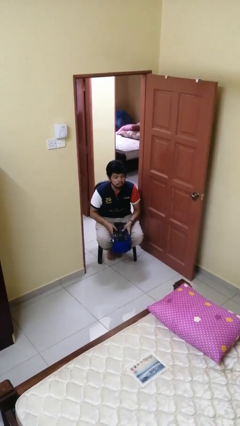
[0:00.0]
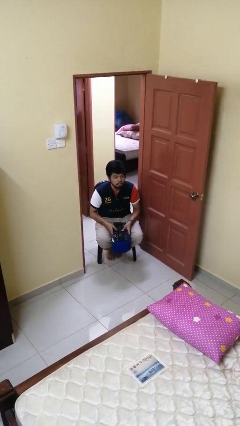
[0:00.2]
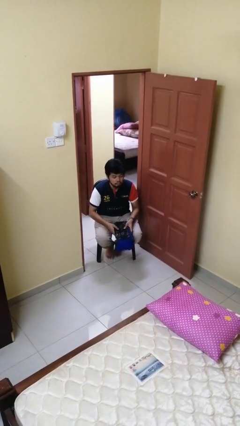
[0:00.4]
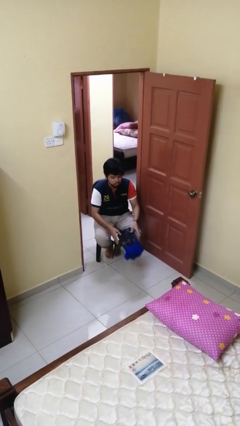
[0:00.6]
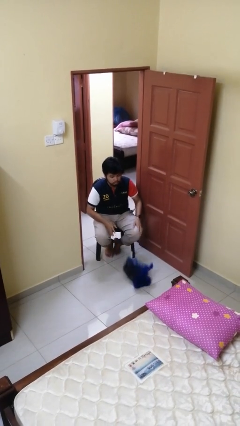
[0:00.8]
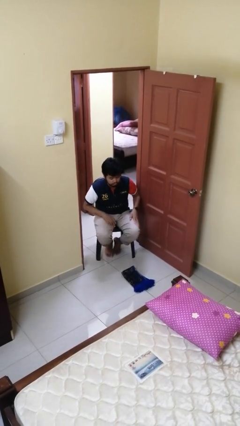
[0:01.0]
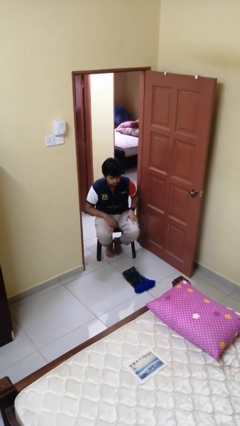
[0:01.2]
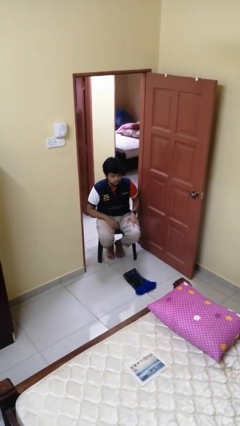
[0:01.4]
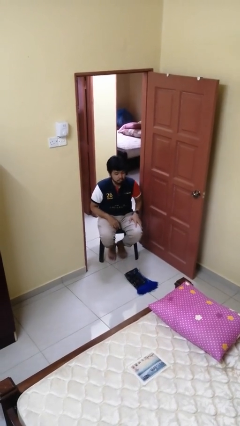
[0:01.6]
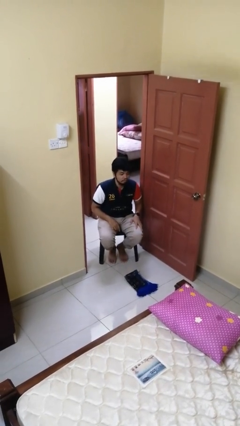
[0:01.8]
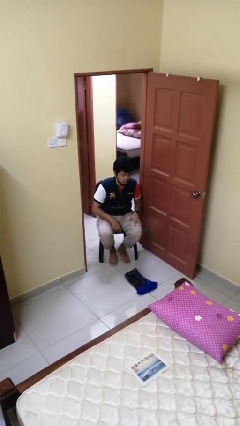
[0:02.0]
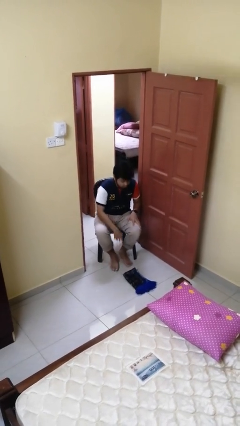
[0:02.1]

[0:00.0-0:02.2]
person drops object

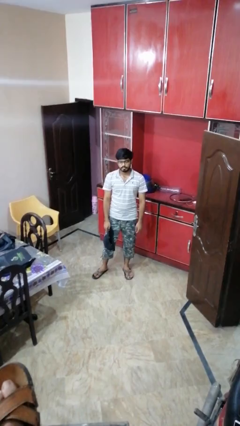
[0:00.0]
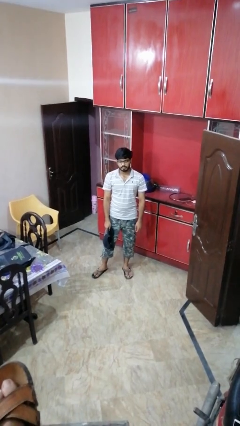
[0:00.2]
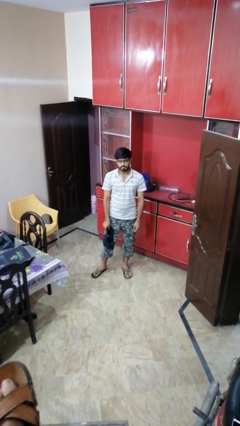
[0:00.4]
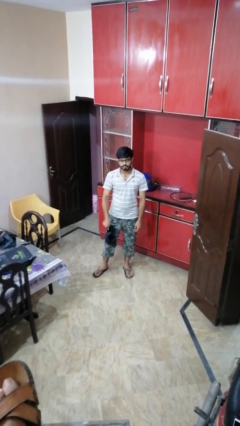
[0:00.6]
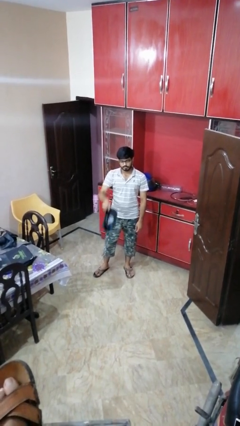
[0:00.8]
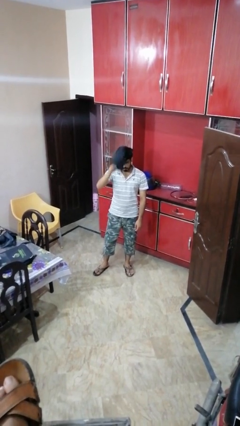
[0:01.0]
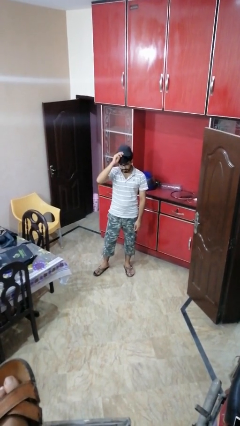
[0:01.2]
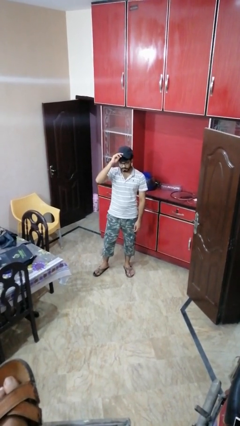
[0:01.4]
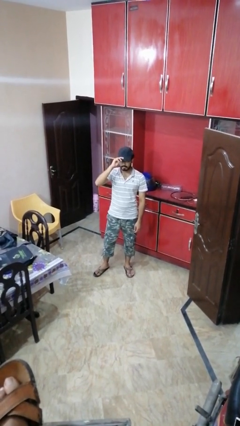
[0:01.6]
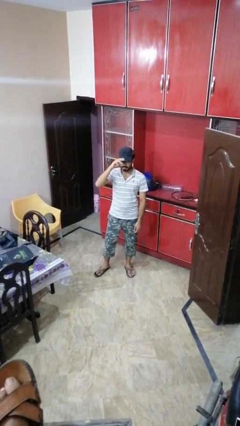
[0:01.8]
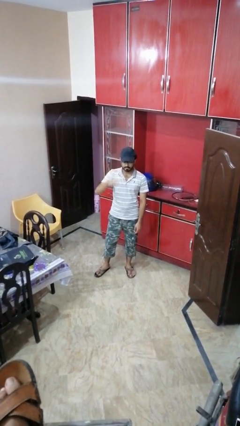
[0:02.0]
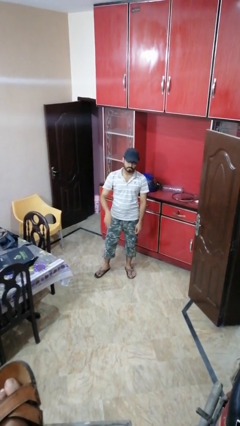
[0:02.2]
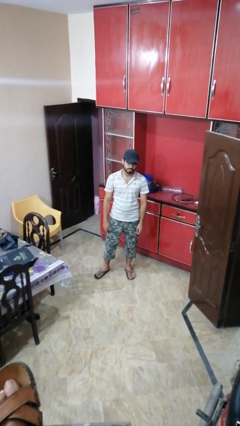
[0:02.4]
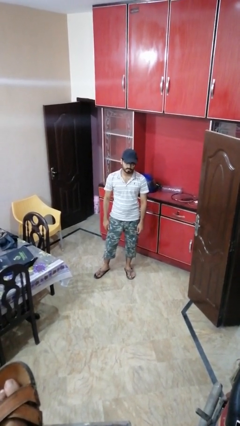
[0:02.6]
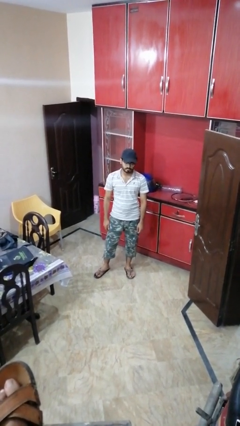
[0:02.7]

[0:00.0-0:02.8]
person puts on hat

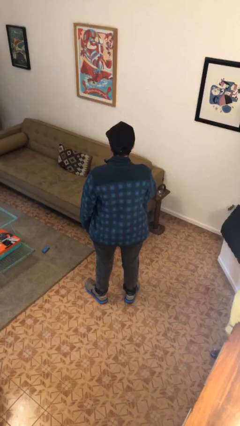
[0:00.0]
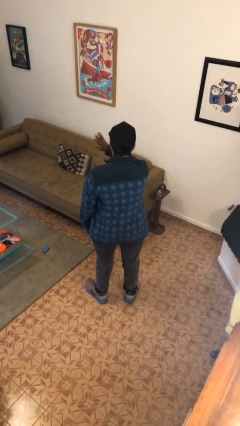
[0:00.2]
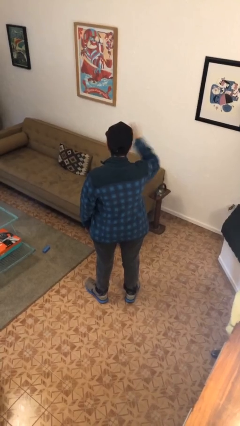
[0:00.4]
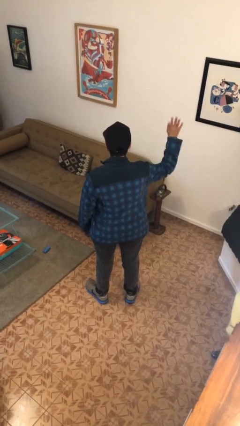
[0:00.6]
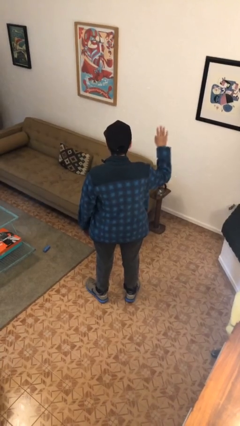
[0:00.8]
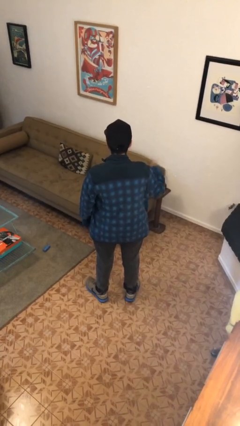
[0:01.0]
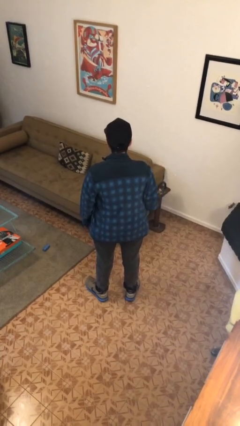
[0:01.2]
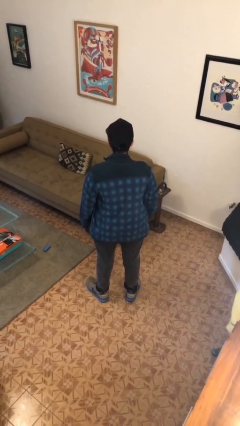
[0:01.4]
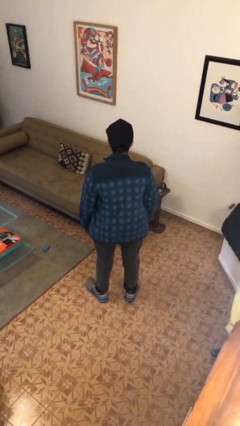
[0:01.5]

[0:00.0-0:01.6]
person gestures swipe right

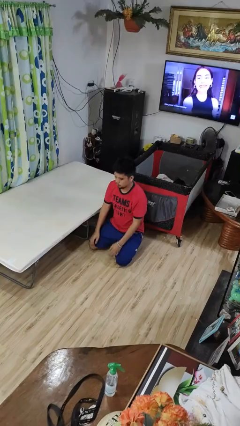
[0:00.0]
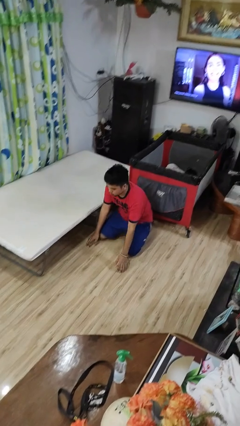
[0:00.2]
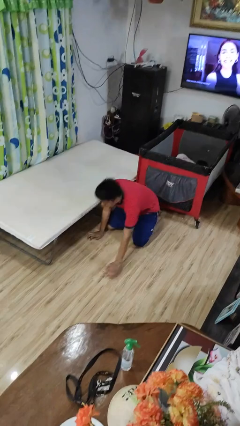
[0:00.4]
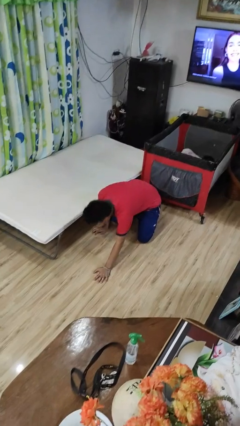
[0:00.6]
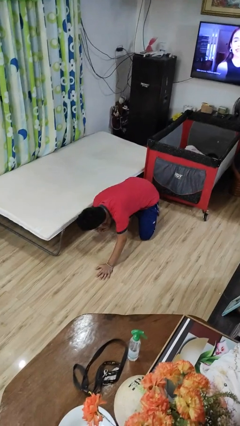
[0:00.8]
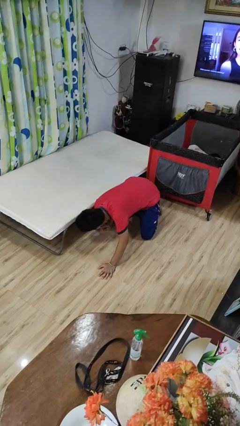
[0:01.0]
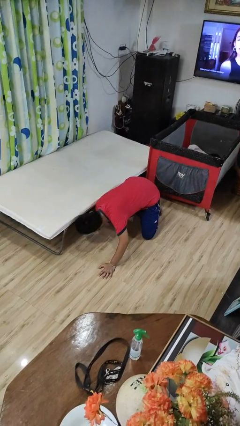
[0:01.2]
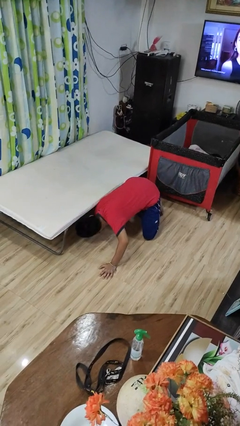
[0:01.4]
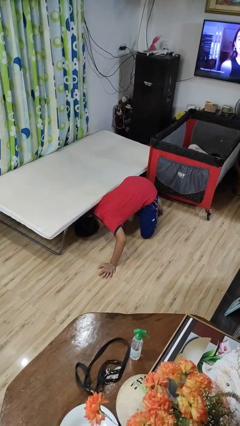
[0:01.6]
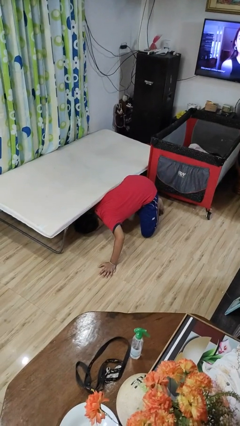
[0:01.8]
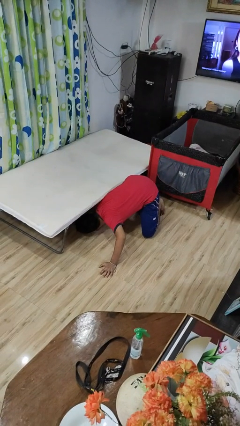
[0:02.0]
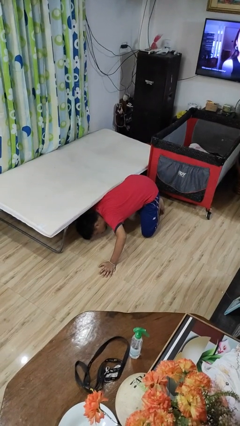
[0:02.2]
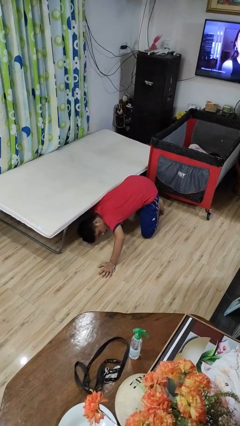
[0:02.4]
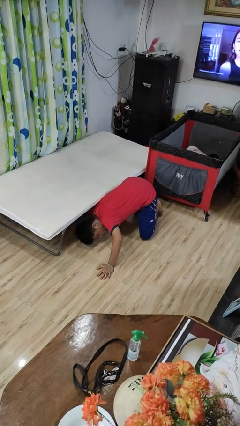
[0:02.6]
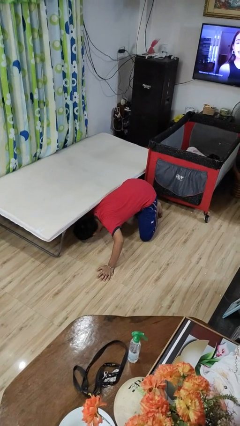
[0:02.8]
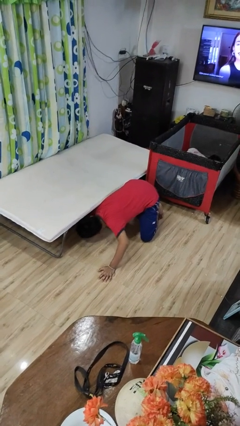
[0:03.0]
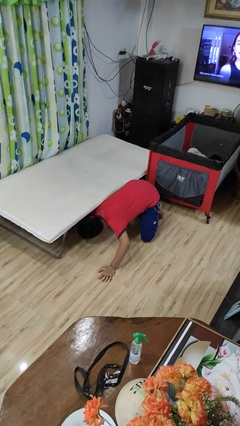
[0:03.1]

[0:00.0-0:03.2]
person searches under bed

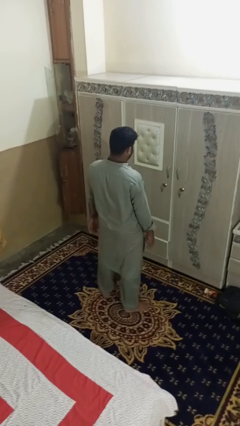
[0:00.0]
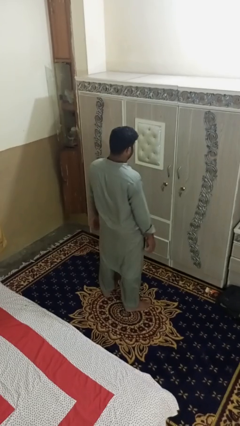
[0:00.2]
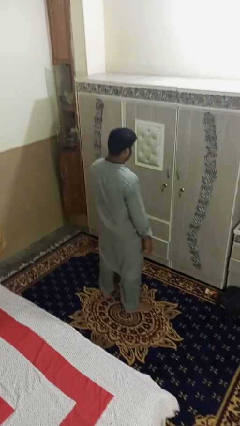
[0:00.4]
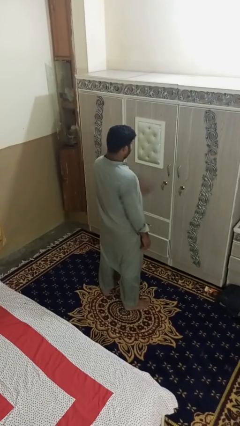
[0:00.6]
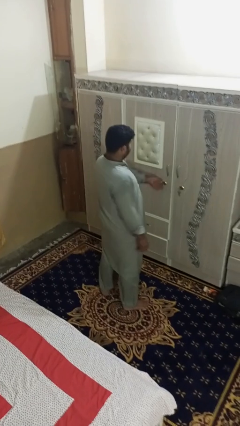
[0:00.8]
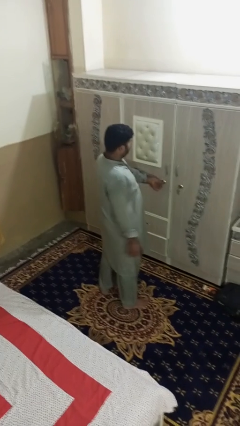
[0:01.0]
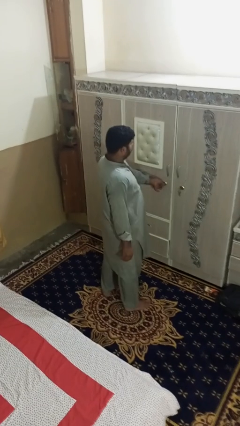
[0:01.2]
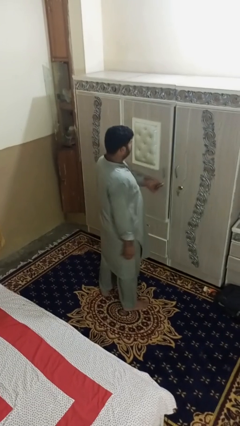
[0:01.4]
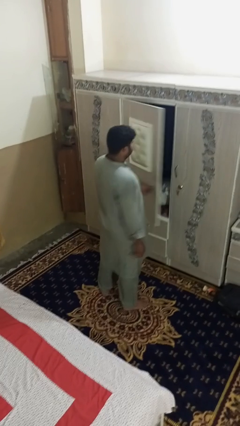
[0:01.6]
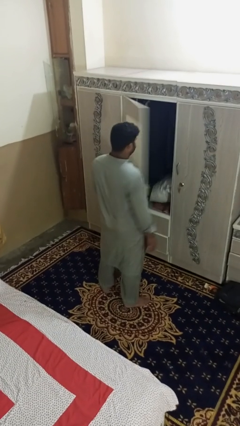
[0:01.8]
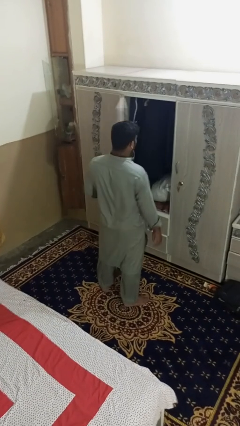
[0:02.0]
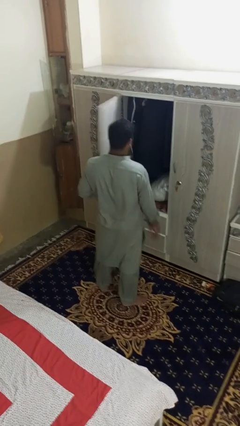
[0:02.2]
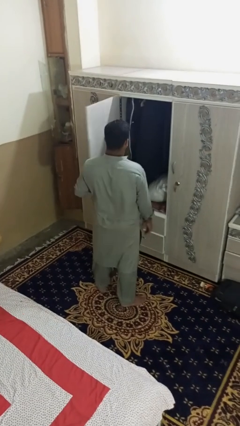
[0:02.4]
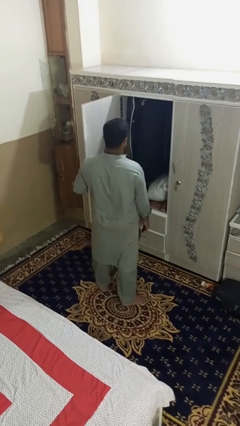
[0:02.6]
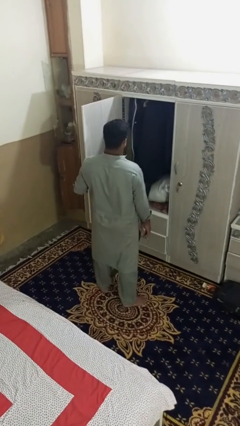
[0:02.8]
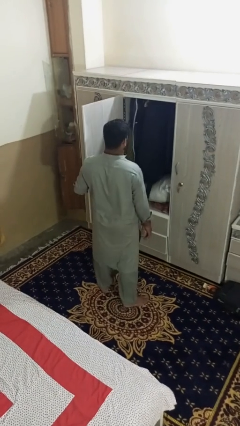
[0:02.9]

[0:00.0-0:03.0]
person opens dresser drawer

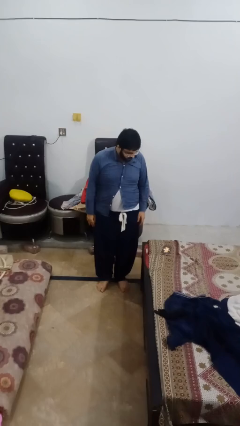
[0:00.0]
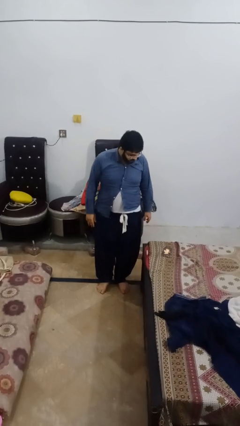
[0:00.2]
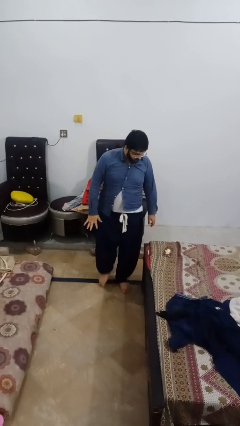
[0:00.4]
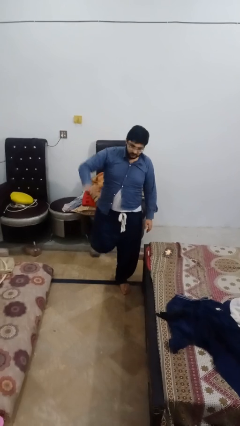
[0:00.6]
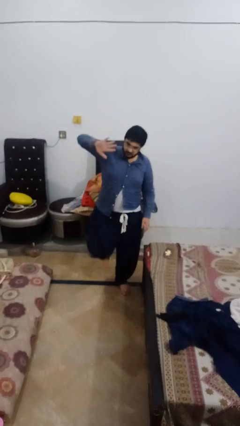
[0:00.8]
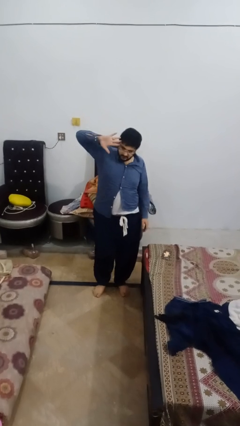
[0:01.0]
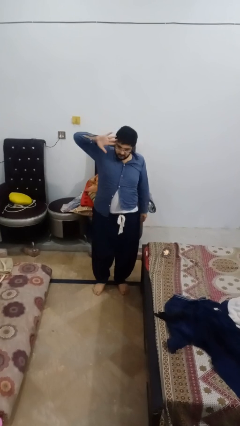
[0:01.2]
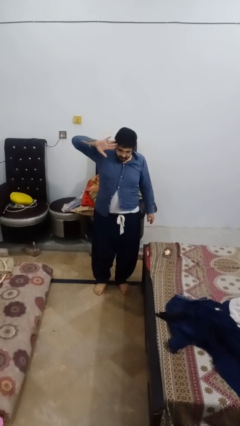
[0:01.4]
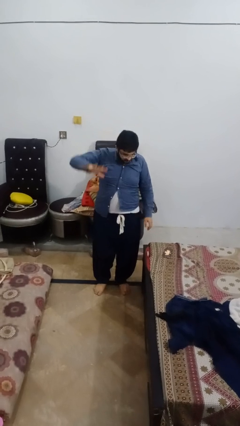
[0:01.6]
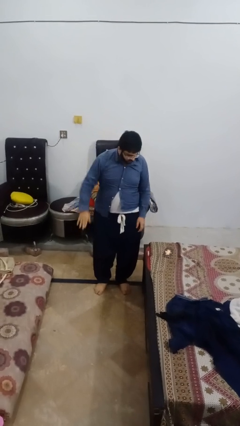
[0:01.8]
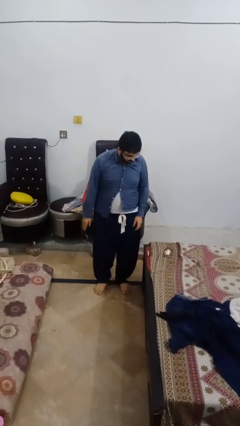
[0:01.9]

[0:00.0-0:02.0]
person salutes

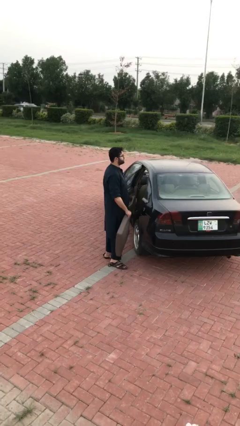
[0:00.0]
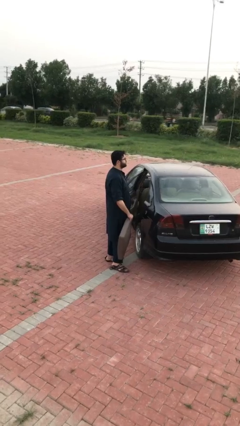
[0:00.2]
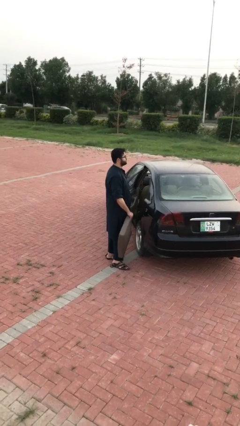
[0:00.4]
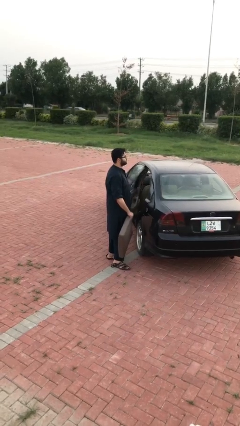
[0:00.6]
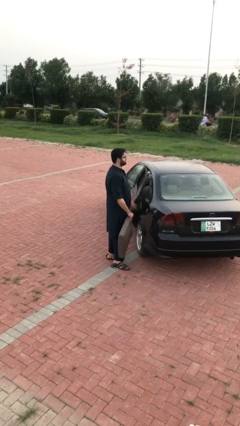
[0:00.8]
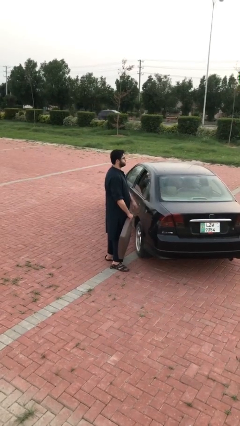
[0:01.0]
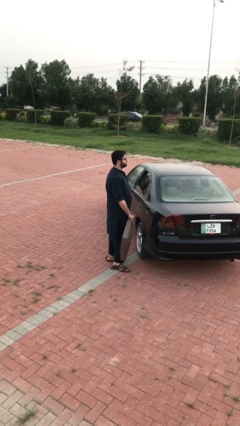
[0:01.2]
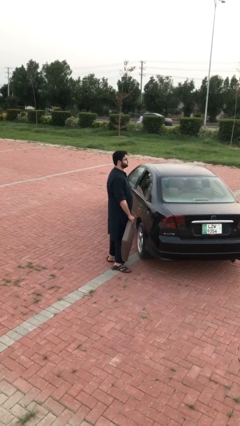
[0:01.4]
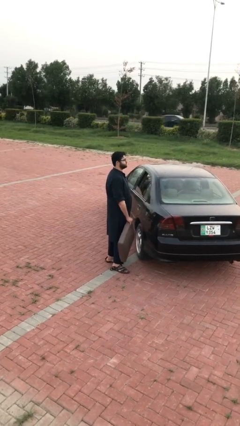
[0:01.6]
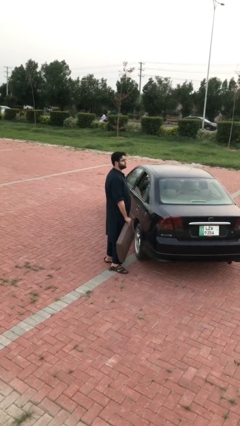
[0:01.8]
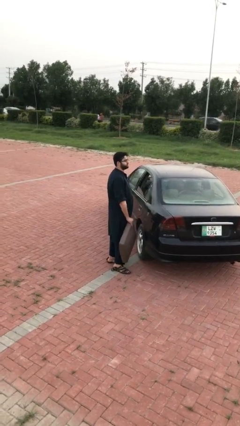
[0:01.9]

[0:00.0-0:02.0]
person closes car door
